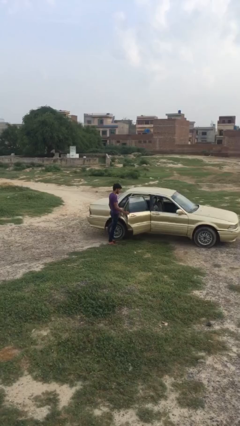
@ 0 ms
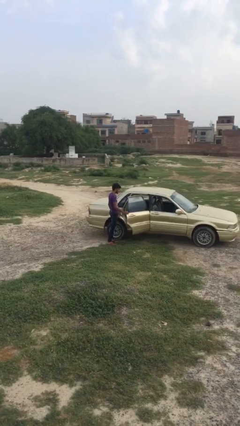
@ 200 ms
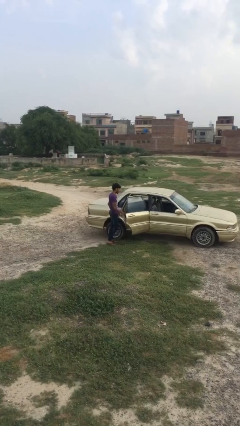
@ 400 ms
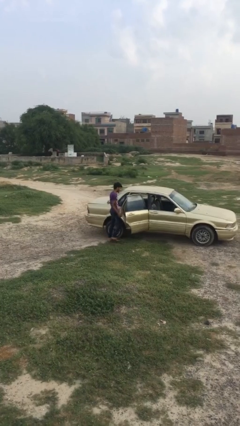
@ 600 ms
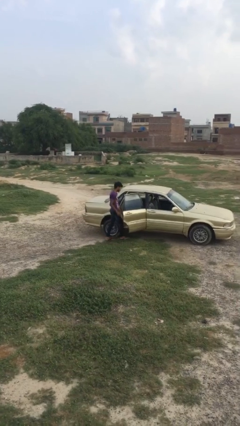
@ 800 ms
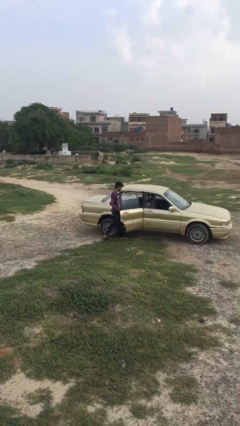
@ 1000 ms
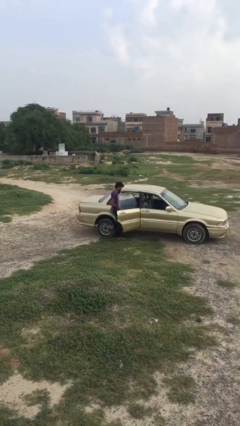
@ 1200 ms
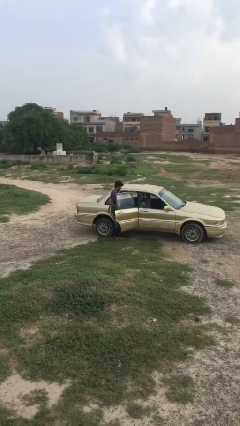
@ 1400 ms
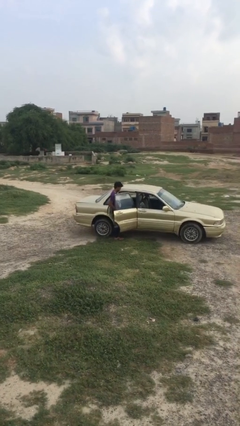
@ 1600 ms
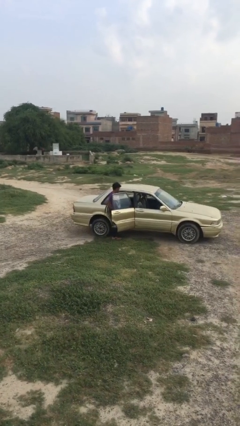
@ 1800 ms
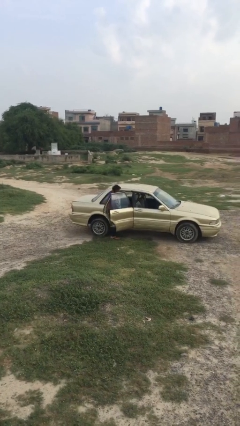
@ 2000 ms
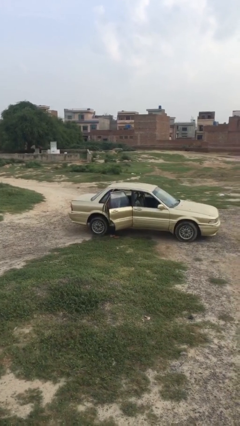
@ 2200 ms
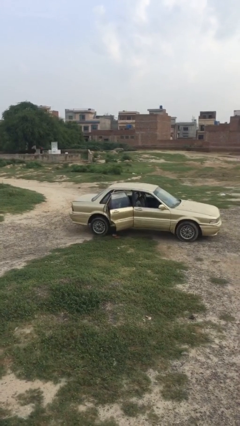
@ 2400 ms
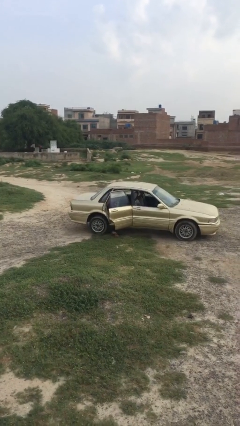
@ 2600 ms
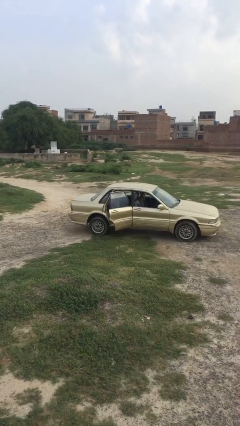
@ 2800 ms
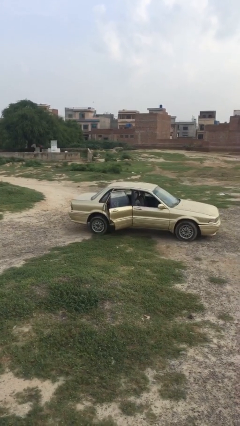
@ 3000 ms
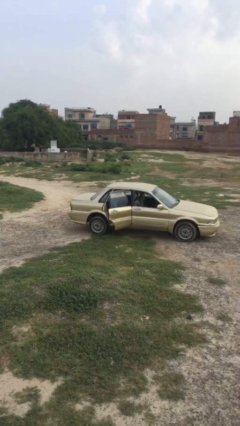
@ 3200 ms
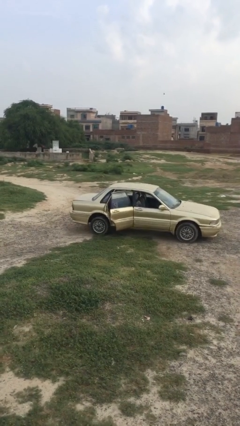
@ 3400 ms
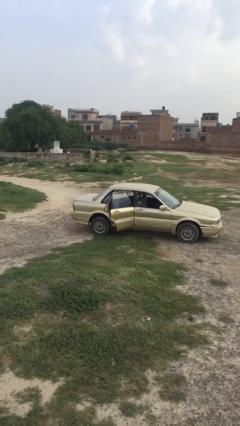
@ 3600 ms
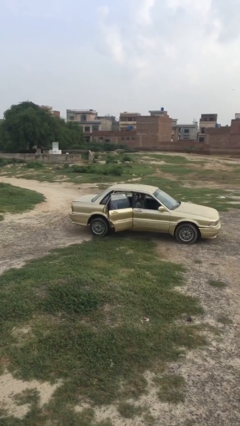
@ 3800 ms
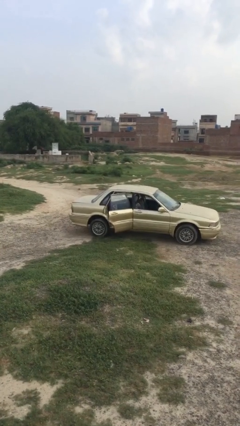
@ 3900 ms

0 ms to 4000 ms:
person enters car

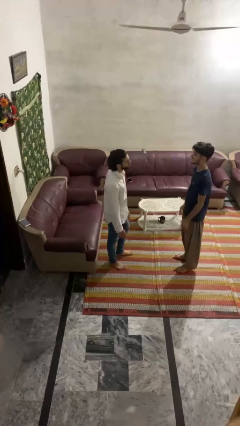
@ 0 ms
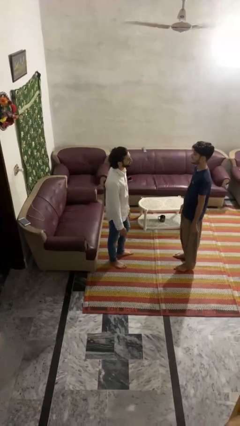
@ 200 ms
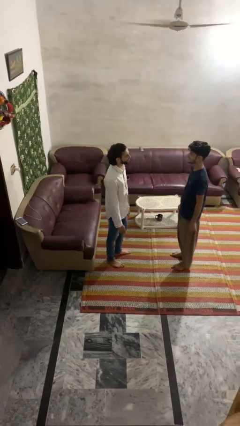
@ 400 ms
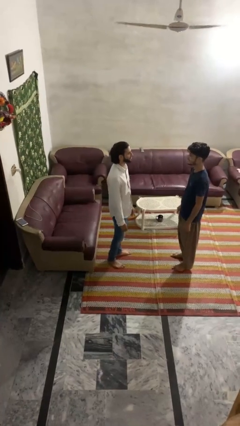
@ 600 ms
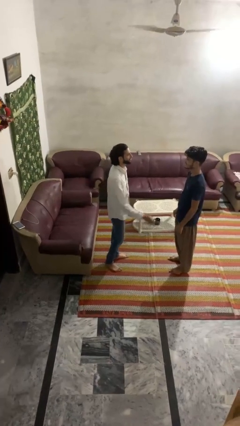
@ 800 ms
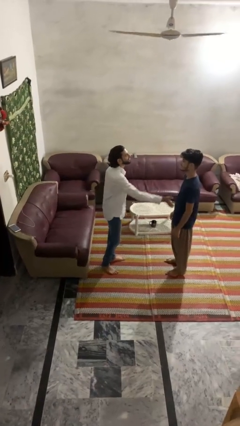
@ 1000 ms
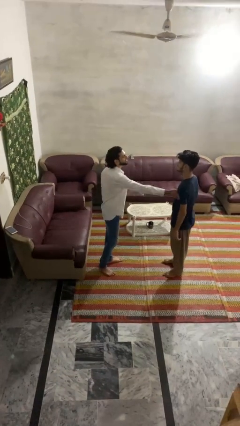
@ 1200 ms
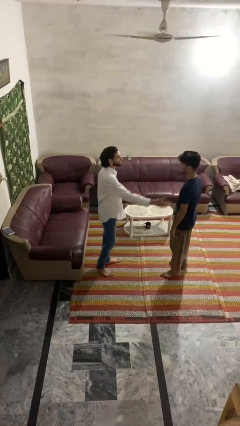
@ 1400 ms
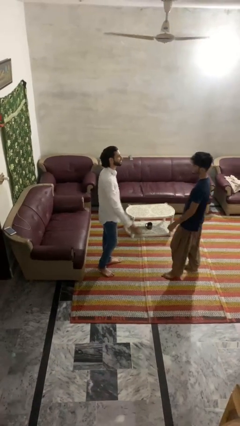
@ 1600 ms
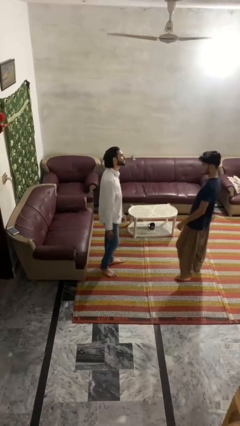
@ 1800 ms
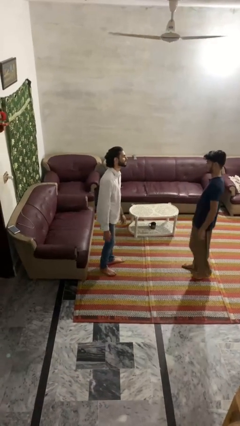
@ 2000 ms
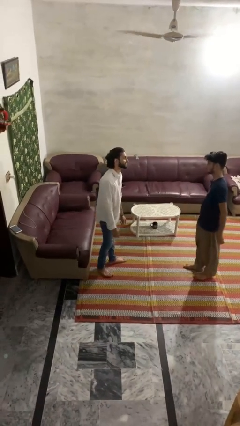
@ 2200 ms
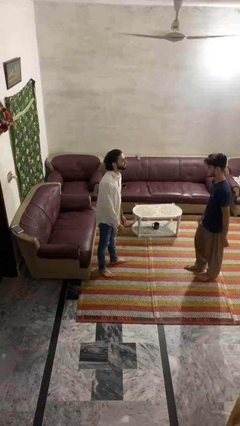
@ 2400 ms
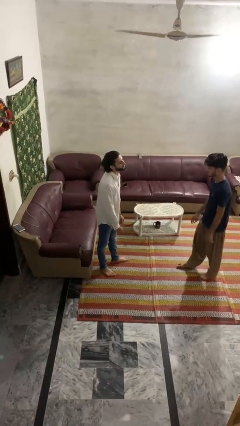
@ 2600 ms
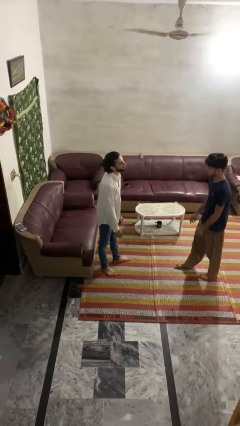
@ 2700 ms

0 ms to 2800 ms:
person shoves person

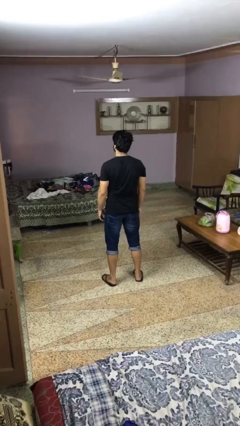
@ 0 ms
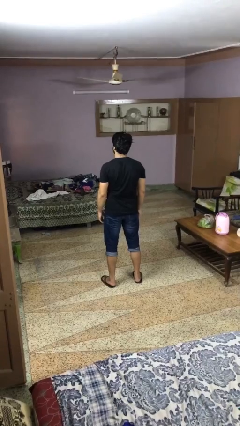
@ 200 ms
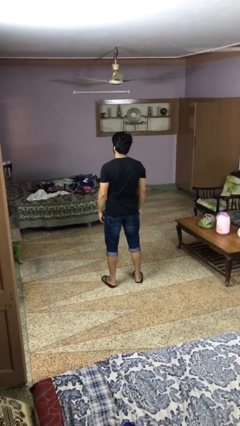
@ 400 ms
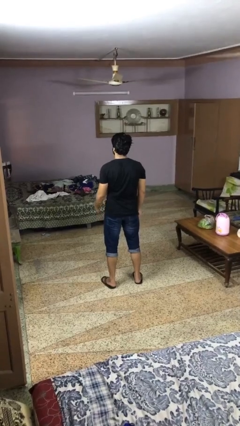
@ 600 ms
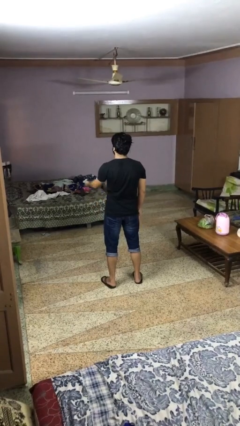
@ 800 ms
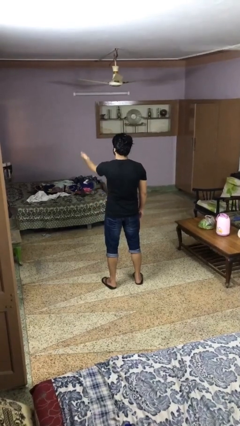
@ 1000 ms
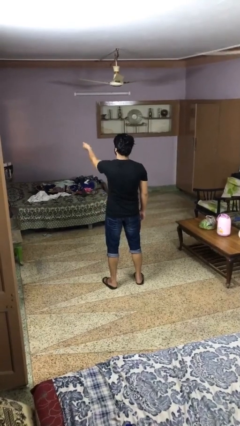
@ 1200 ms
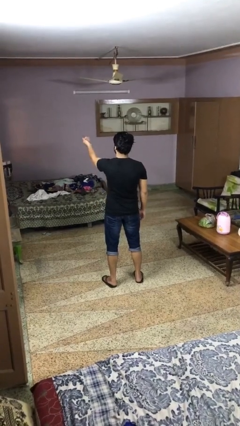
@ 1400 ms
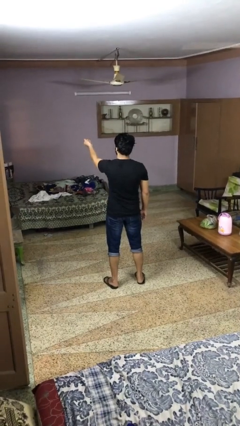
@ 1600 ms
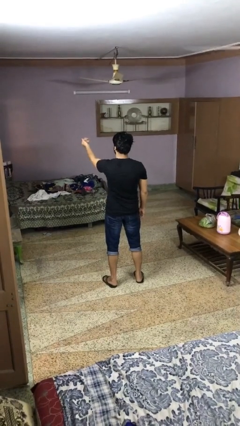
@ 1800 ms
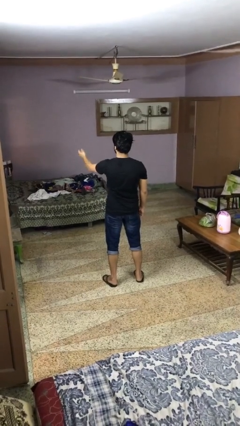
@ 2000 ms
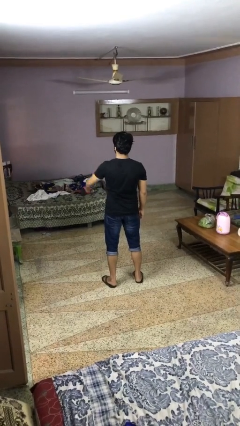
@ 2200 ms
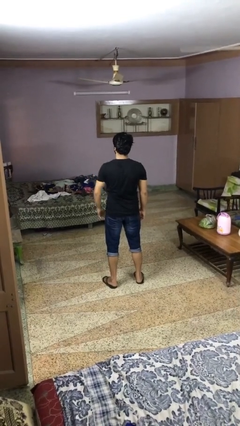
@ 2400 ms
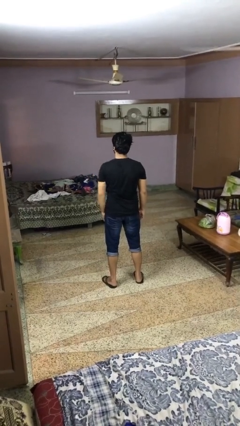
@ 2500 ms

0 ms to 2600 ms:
person gestures come here

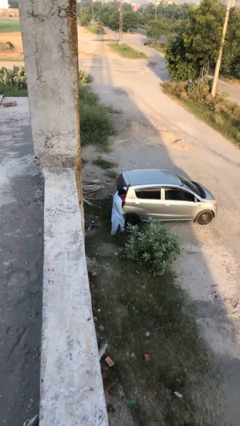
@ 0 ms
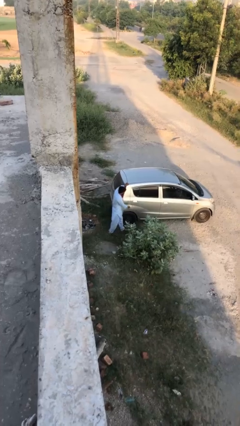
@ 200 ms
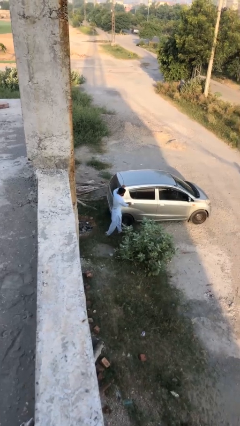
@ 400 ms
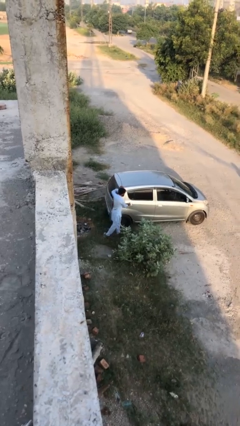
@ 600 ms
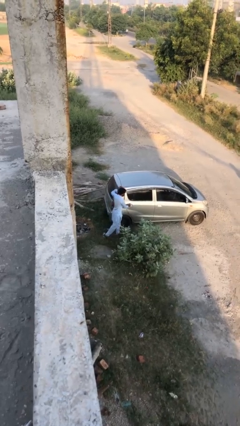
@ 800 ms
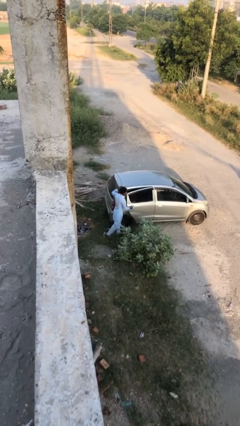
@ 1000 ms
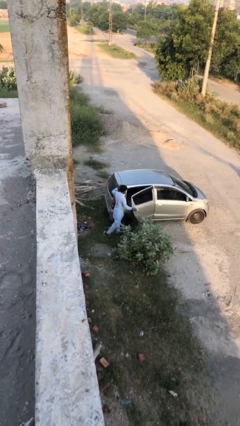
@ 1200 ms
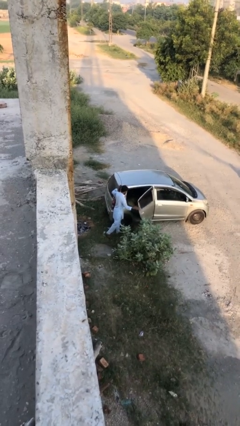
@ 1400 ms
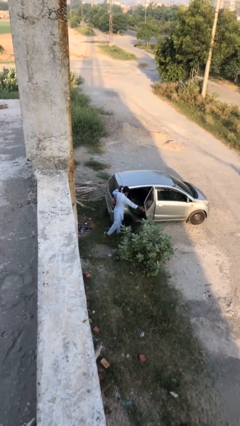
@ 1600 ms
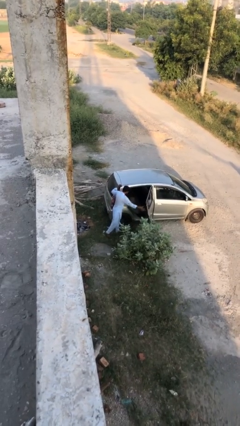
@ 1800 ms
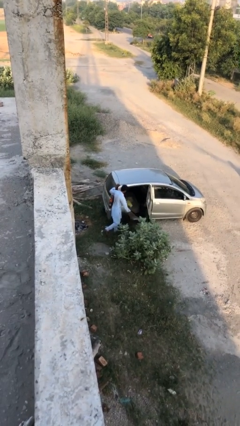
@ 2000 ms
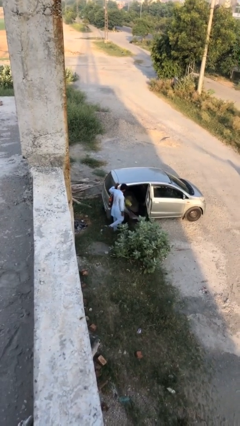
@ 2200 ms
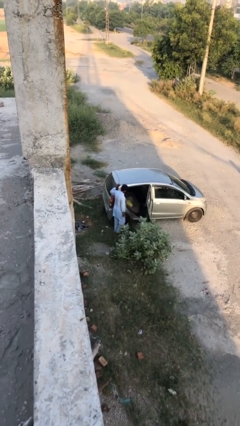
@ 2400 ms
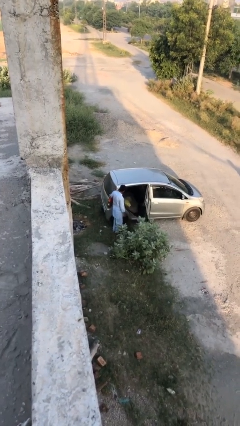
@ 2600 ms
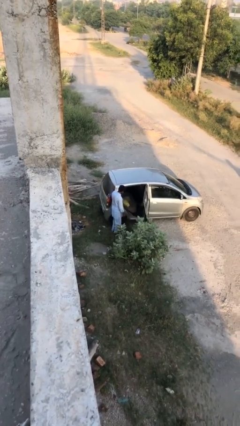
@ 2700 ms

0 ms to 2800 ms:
person opens car door

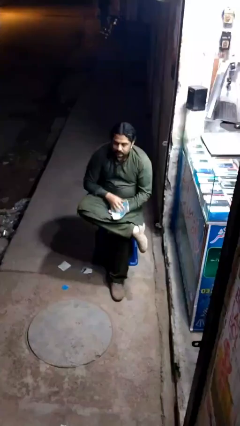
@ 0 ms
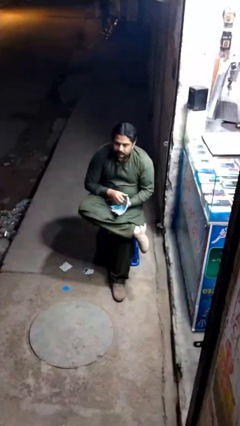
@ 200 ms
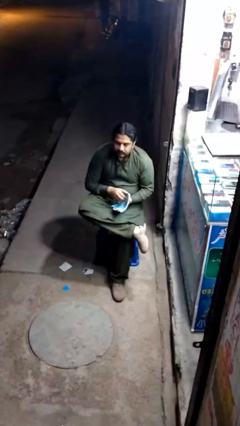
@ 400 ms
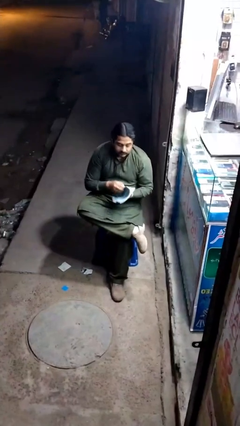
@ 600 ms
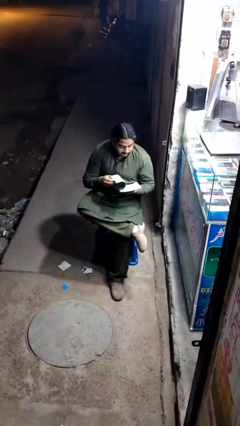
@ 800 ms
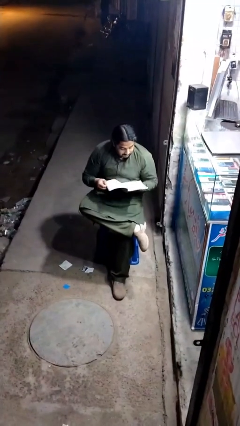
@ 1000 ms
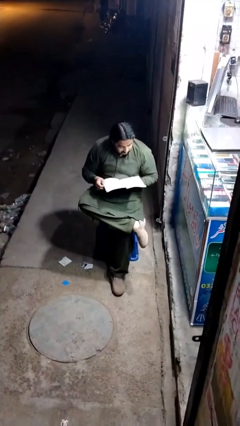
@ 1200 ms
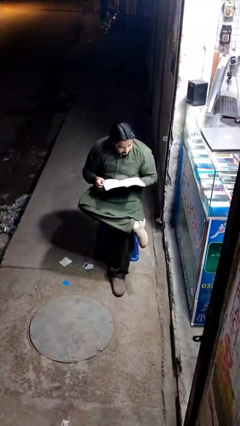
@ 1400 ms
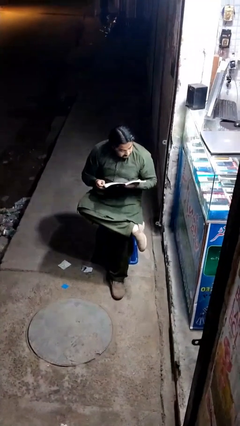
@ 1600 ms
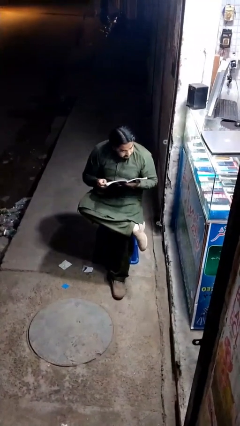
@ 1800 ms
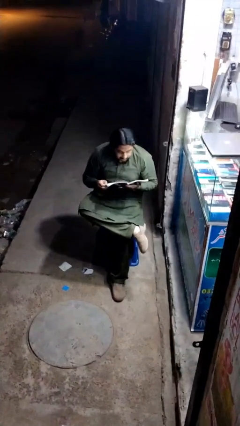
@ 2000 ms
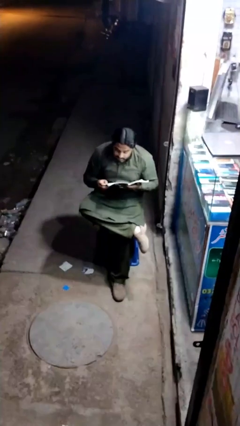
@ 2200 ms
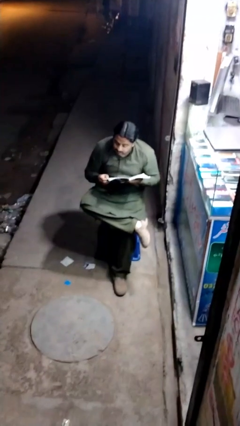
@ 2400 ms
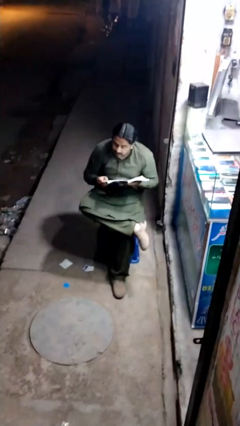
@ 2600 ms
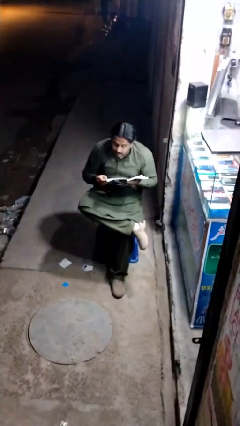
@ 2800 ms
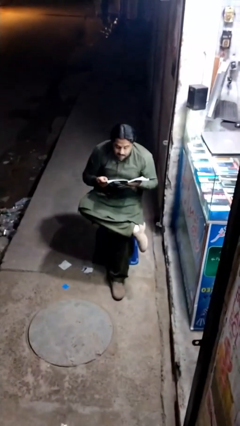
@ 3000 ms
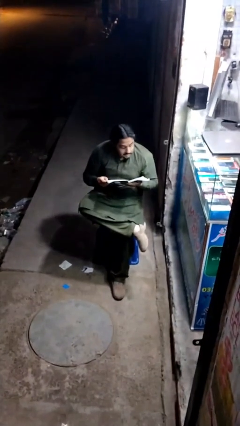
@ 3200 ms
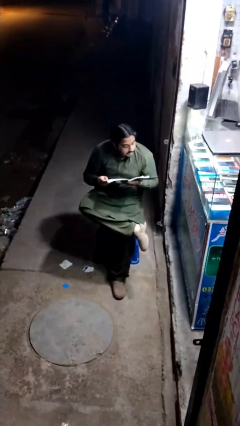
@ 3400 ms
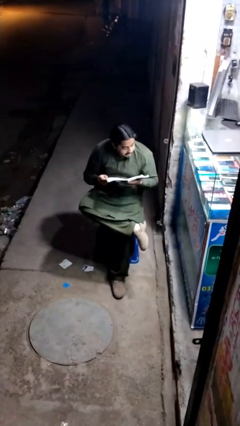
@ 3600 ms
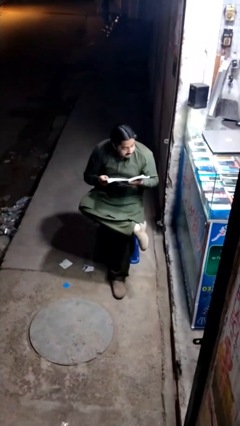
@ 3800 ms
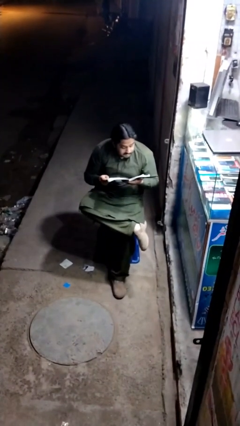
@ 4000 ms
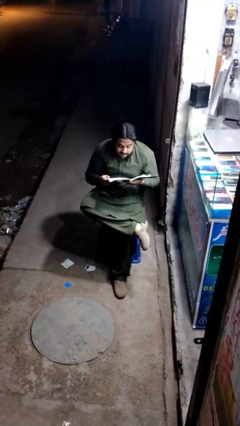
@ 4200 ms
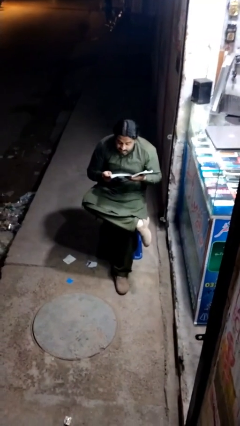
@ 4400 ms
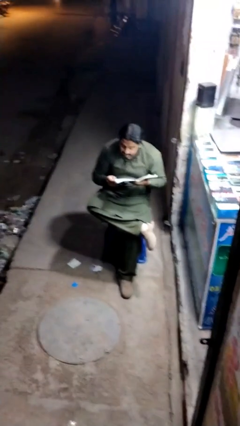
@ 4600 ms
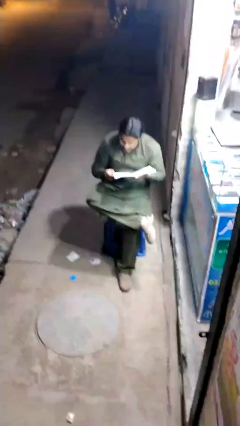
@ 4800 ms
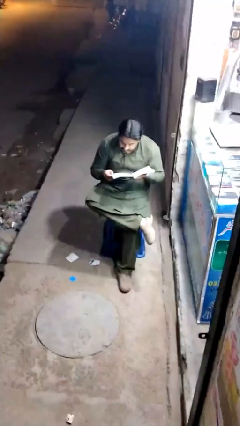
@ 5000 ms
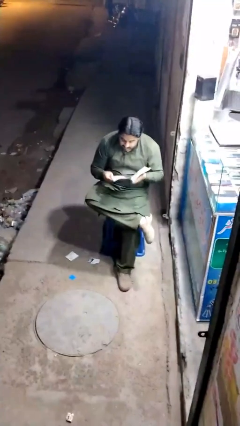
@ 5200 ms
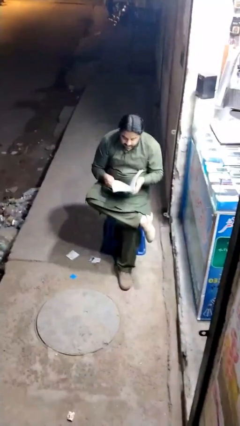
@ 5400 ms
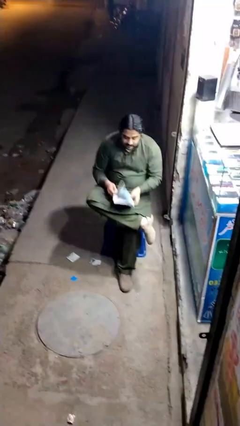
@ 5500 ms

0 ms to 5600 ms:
person reads document
